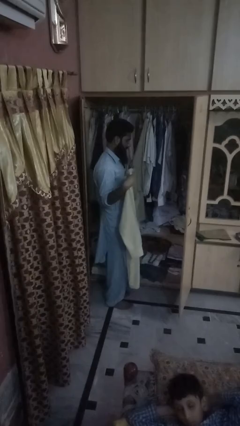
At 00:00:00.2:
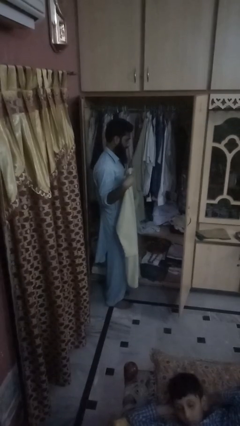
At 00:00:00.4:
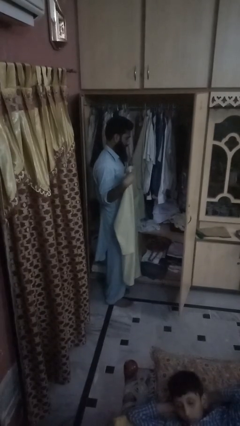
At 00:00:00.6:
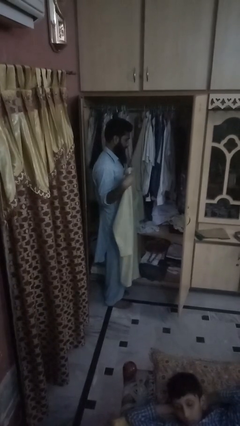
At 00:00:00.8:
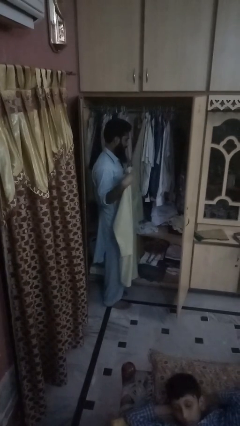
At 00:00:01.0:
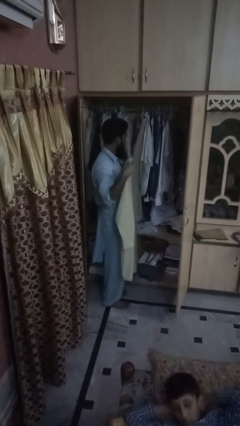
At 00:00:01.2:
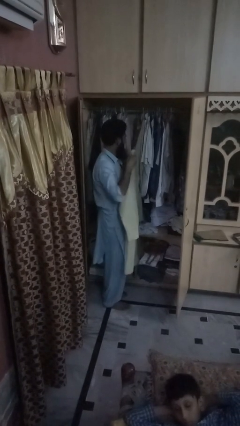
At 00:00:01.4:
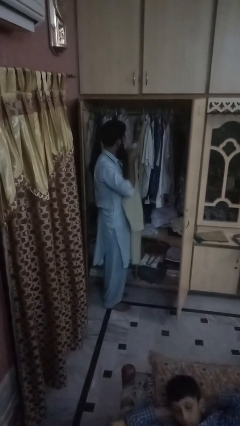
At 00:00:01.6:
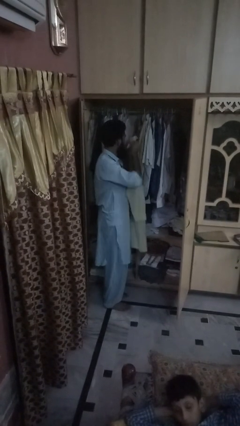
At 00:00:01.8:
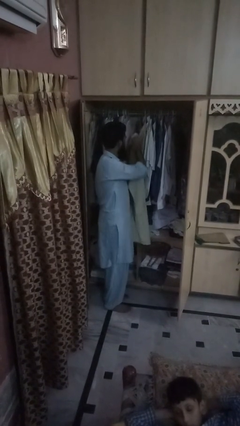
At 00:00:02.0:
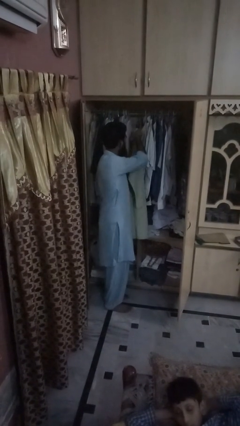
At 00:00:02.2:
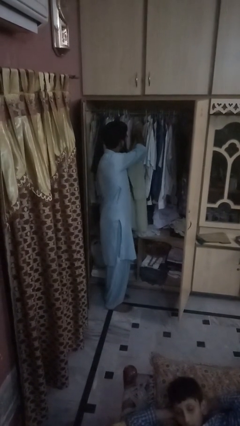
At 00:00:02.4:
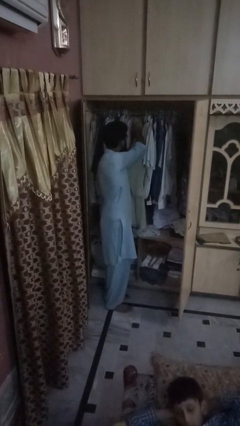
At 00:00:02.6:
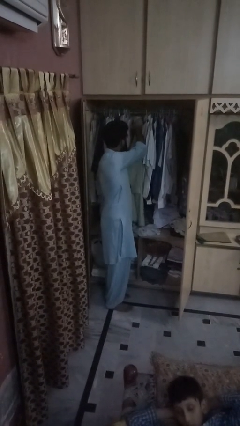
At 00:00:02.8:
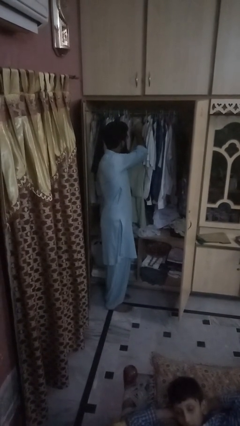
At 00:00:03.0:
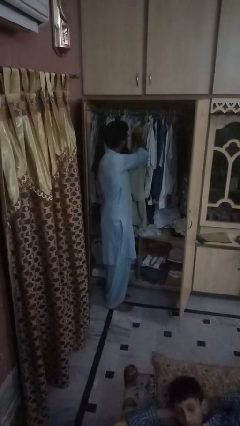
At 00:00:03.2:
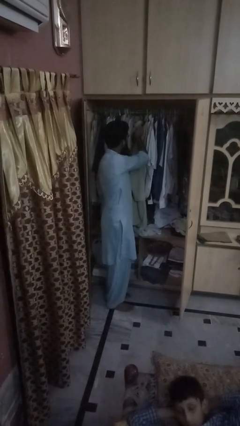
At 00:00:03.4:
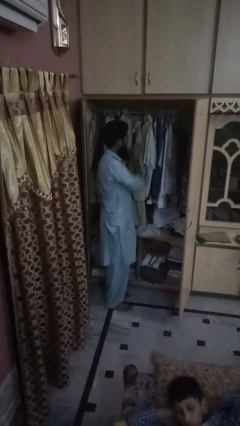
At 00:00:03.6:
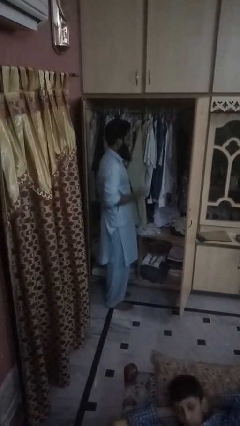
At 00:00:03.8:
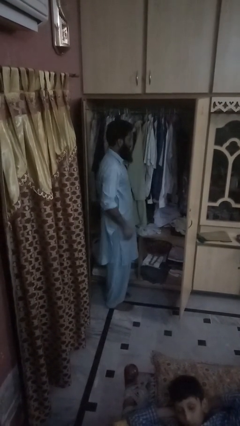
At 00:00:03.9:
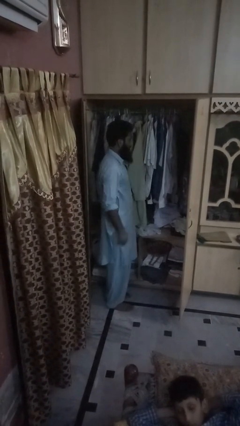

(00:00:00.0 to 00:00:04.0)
person takes clothes from closet

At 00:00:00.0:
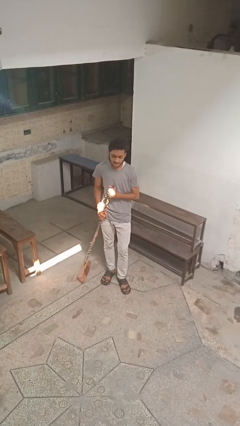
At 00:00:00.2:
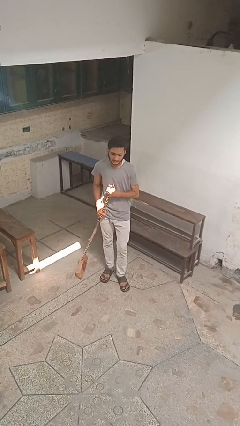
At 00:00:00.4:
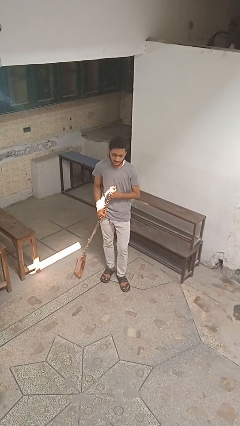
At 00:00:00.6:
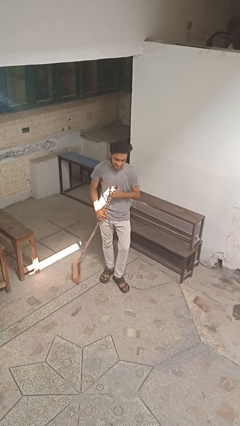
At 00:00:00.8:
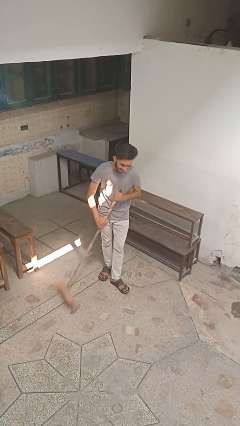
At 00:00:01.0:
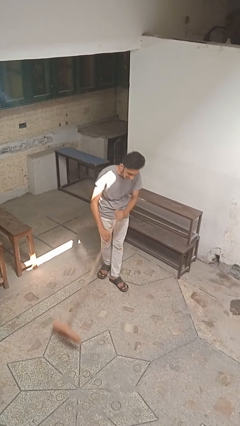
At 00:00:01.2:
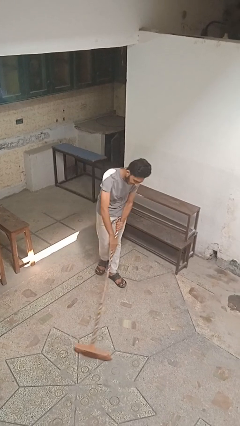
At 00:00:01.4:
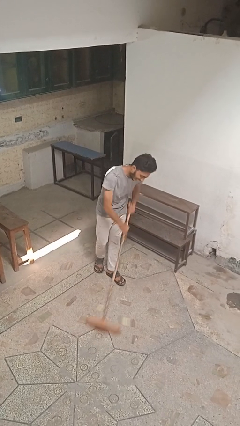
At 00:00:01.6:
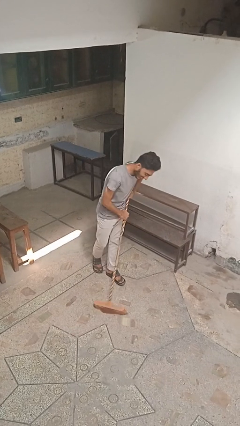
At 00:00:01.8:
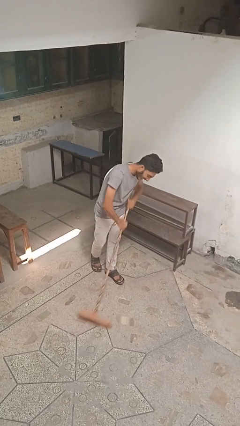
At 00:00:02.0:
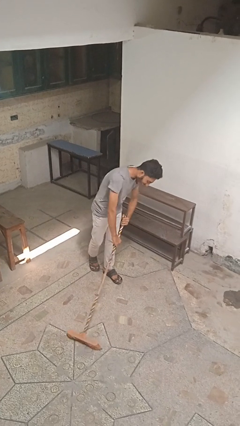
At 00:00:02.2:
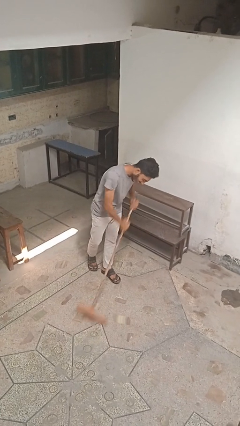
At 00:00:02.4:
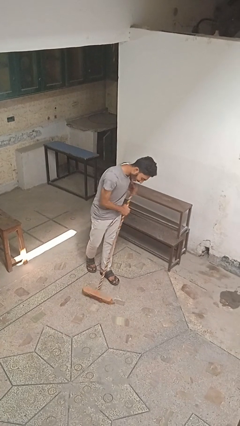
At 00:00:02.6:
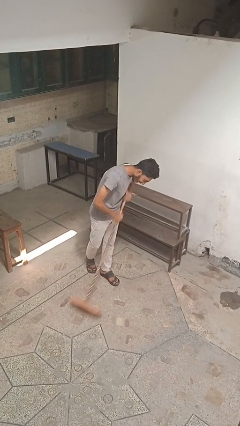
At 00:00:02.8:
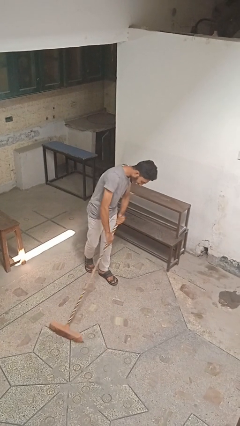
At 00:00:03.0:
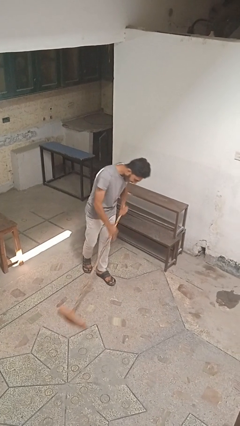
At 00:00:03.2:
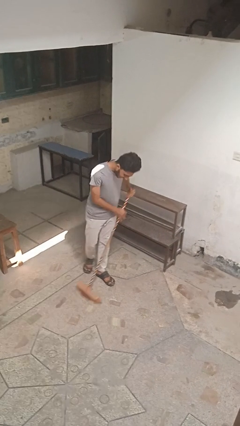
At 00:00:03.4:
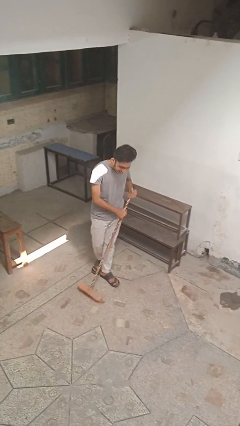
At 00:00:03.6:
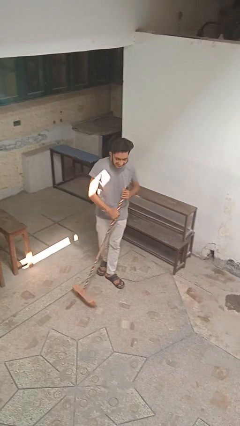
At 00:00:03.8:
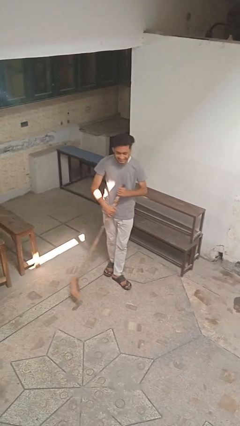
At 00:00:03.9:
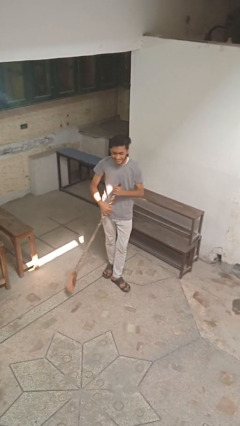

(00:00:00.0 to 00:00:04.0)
person sweeps floor

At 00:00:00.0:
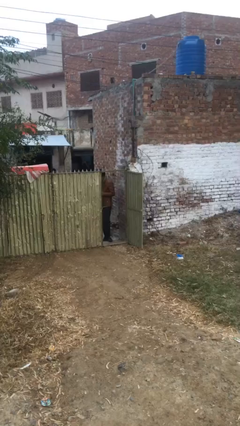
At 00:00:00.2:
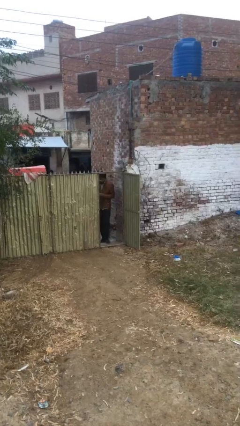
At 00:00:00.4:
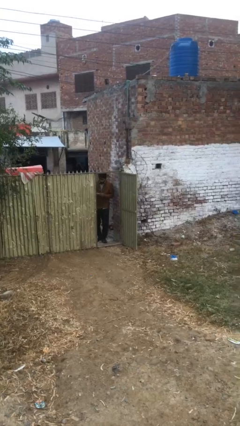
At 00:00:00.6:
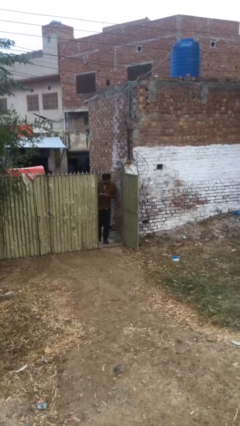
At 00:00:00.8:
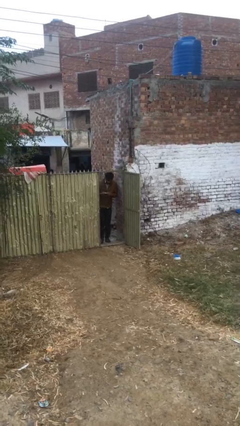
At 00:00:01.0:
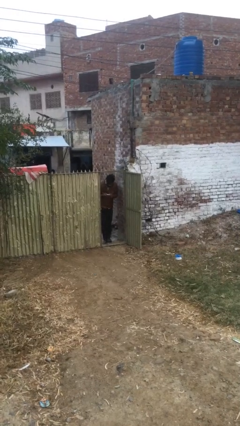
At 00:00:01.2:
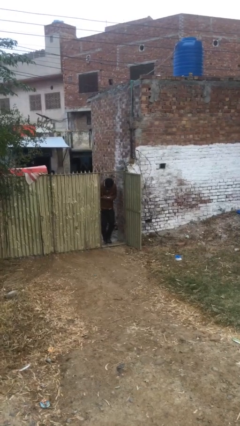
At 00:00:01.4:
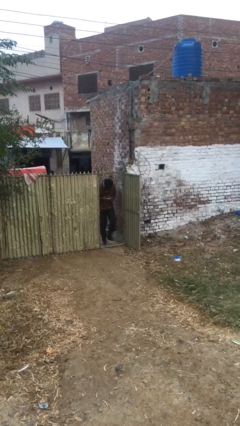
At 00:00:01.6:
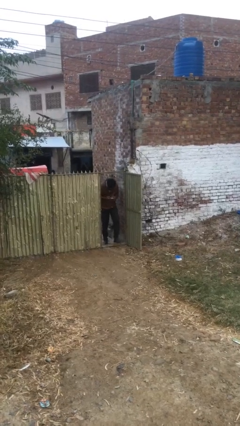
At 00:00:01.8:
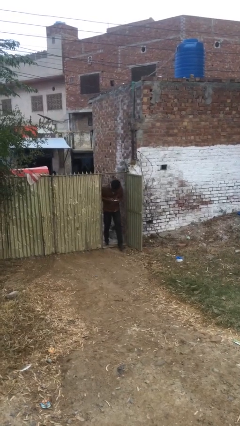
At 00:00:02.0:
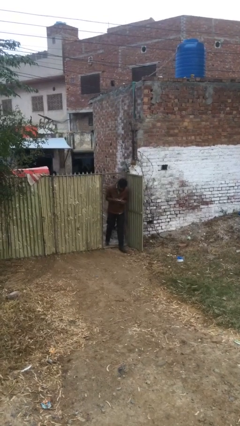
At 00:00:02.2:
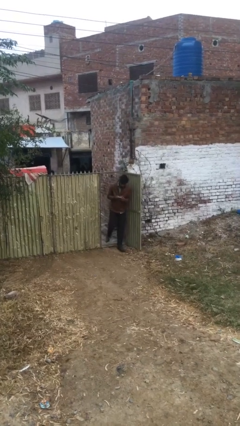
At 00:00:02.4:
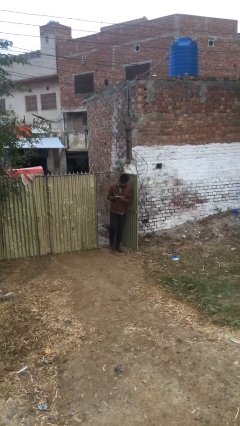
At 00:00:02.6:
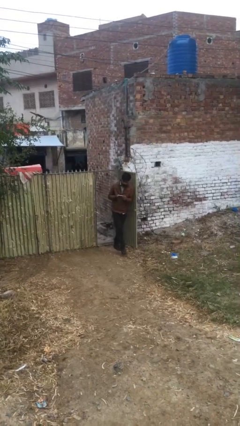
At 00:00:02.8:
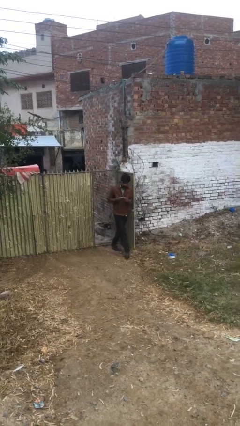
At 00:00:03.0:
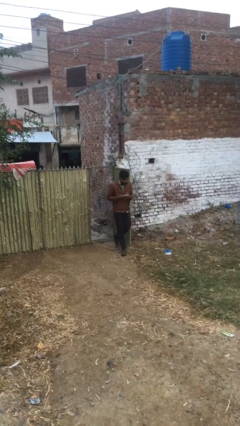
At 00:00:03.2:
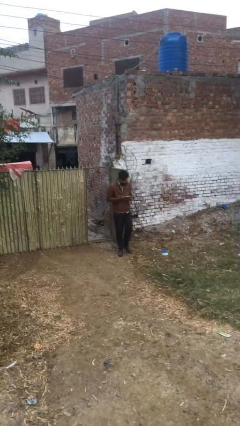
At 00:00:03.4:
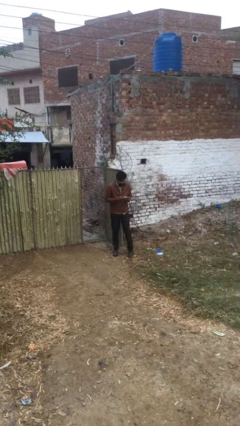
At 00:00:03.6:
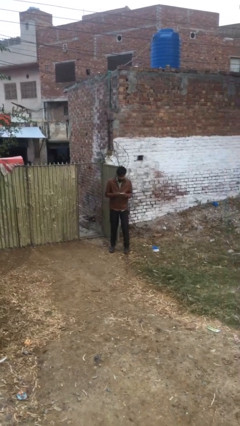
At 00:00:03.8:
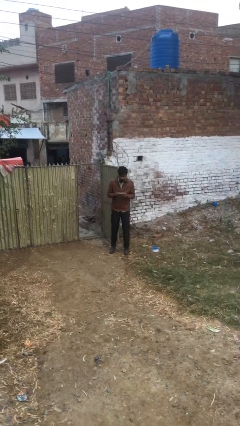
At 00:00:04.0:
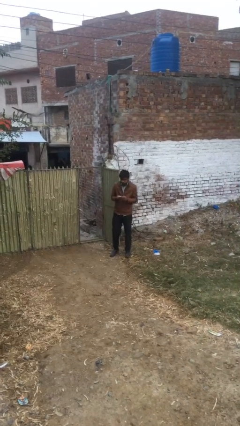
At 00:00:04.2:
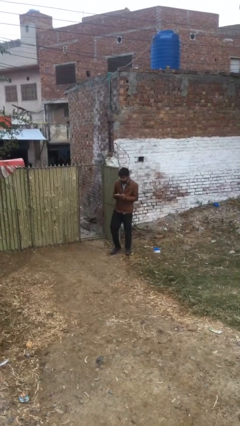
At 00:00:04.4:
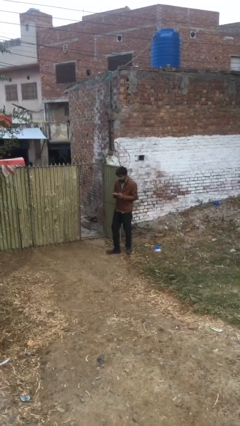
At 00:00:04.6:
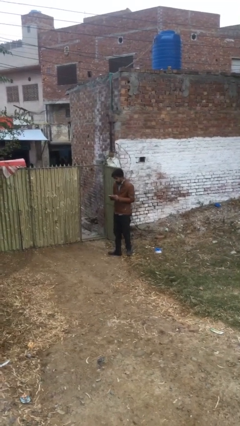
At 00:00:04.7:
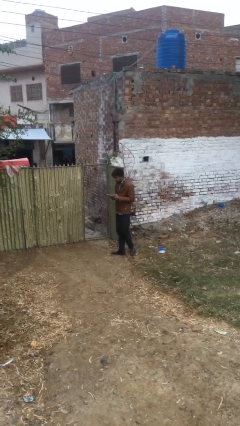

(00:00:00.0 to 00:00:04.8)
person exits scene through structure

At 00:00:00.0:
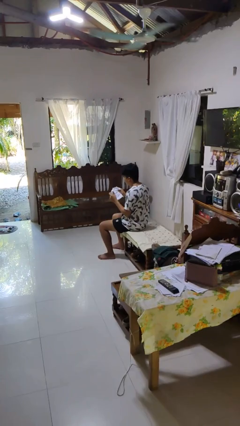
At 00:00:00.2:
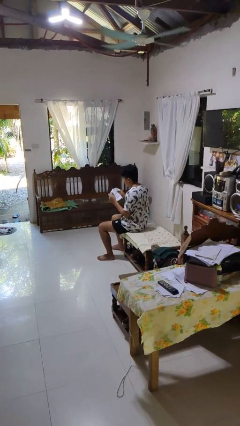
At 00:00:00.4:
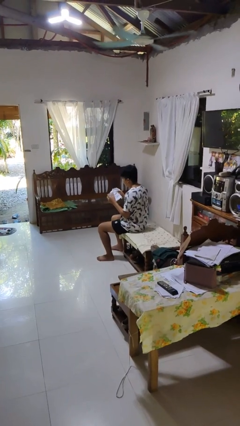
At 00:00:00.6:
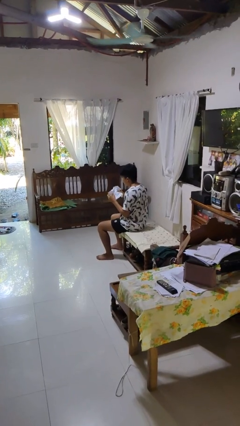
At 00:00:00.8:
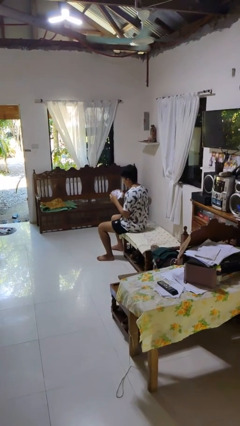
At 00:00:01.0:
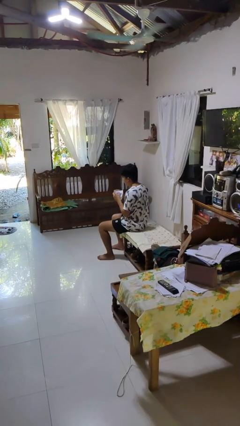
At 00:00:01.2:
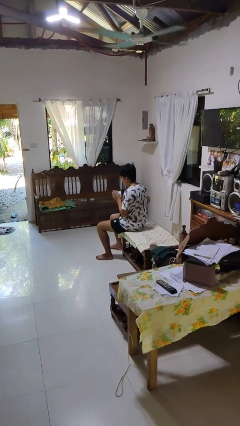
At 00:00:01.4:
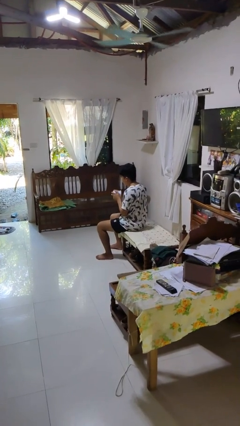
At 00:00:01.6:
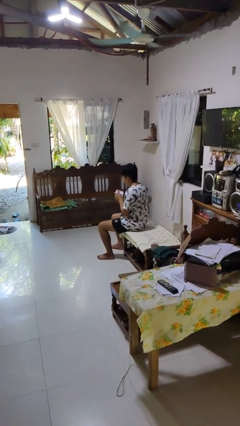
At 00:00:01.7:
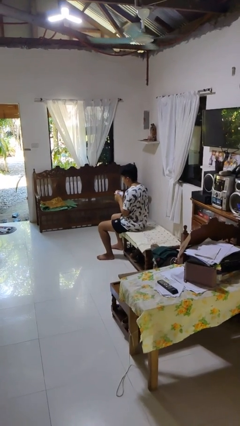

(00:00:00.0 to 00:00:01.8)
person crumples paper

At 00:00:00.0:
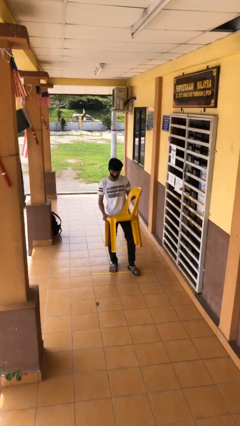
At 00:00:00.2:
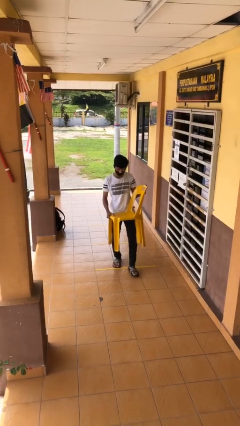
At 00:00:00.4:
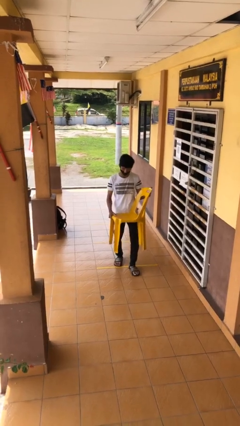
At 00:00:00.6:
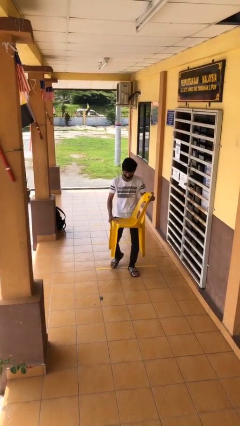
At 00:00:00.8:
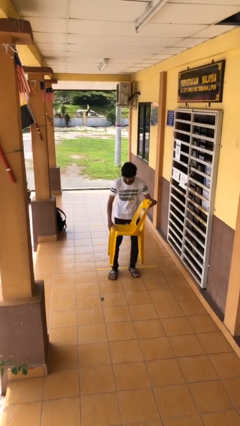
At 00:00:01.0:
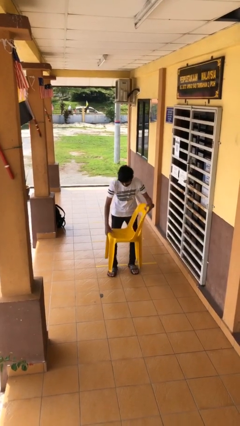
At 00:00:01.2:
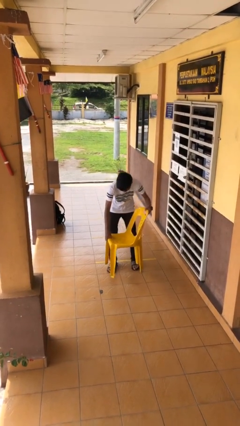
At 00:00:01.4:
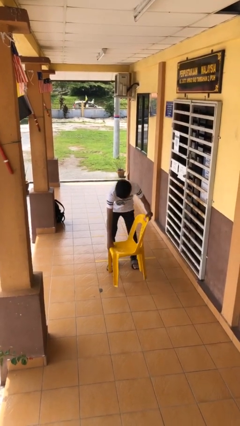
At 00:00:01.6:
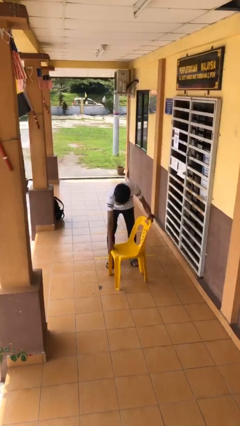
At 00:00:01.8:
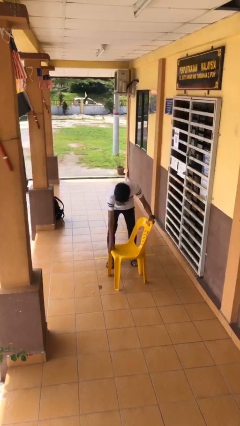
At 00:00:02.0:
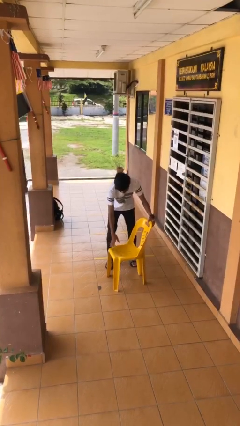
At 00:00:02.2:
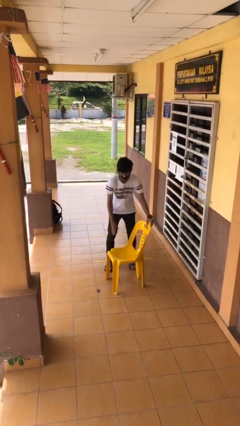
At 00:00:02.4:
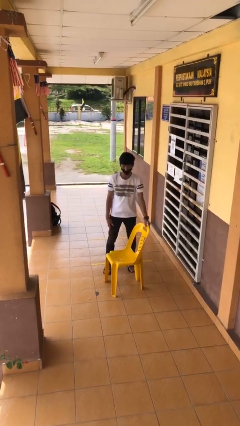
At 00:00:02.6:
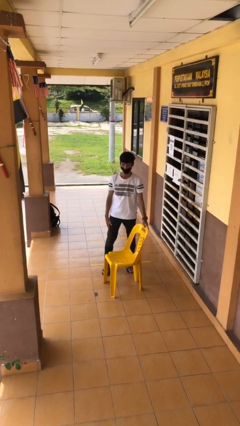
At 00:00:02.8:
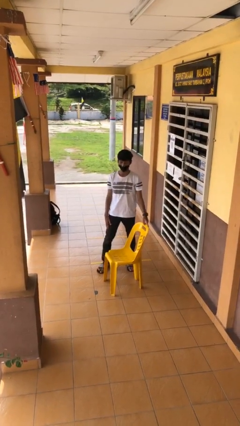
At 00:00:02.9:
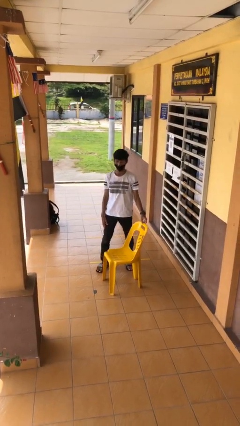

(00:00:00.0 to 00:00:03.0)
person puts down object on floor
